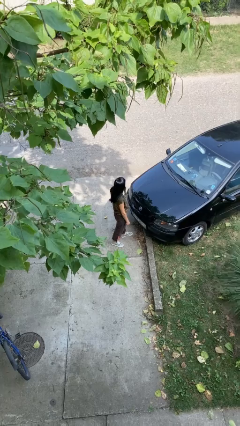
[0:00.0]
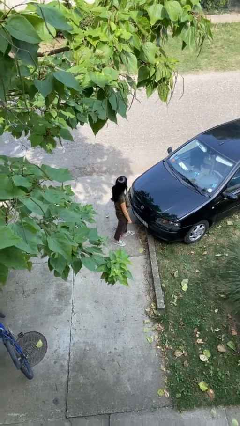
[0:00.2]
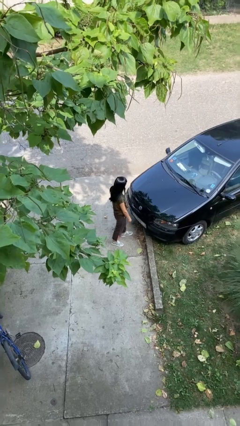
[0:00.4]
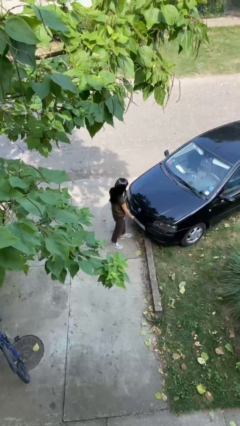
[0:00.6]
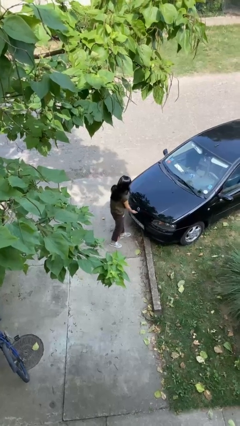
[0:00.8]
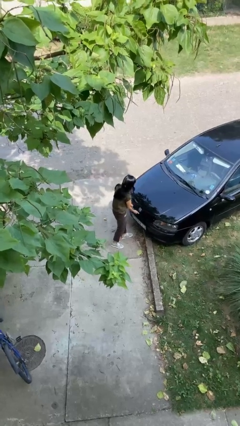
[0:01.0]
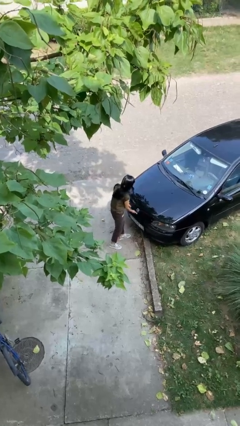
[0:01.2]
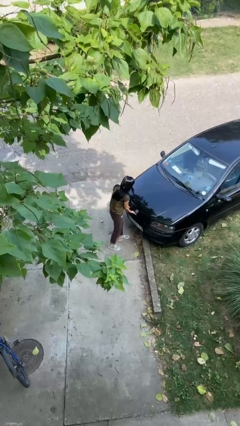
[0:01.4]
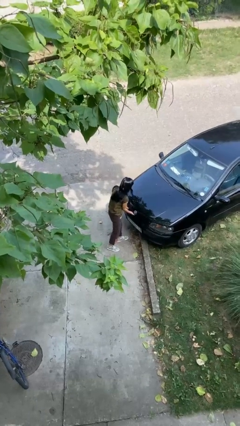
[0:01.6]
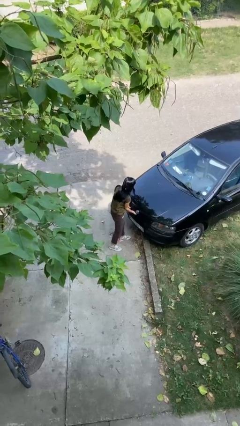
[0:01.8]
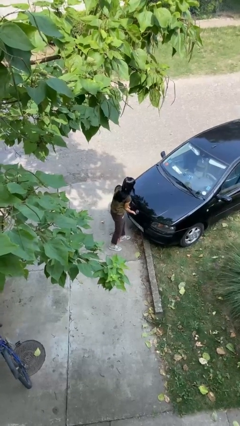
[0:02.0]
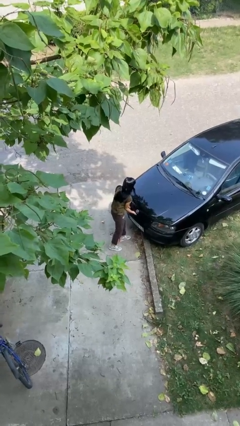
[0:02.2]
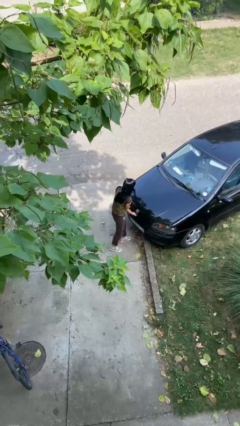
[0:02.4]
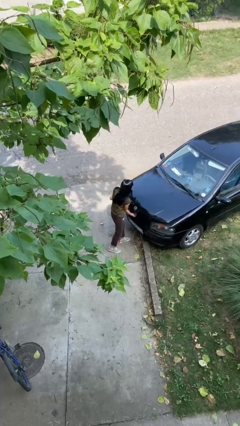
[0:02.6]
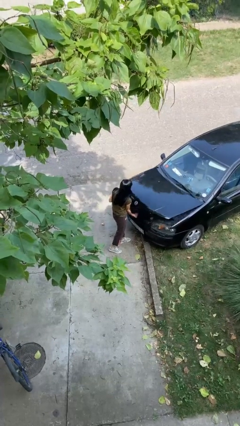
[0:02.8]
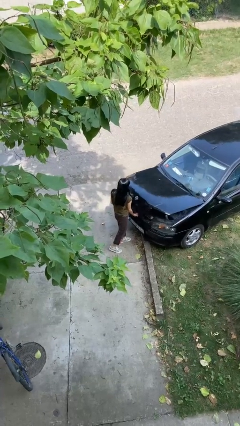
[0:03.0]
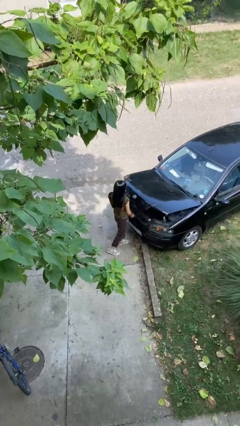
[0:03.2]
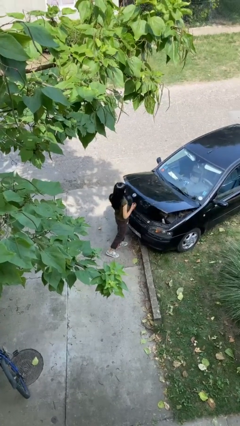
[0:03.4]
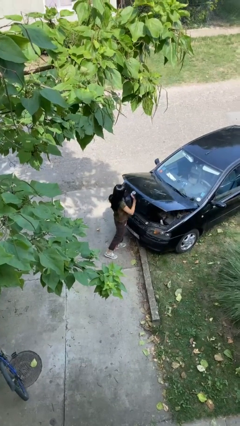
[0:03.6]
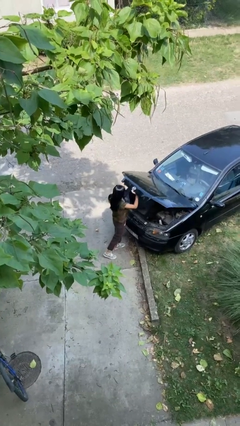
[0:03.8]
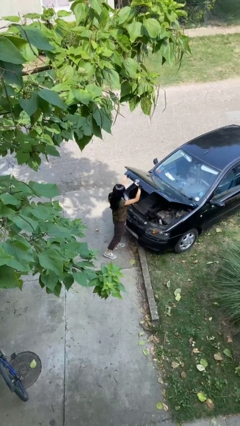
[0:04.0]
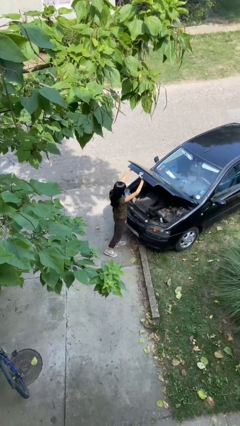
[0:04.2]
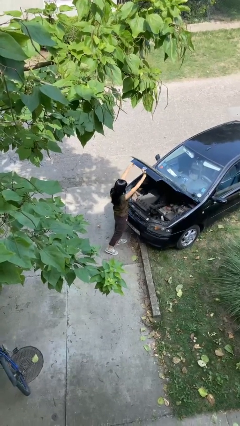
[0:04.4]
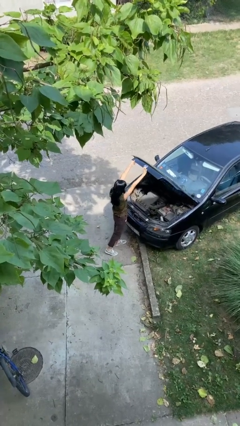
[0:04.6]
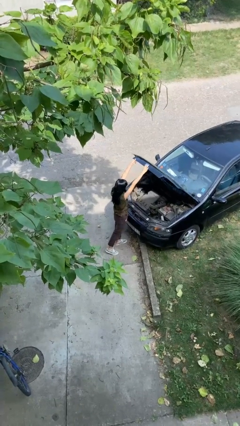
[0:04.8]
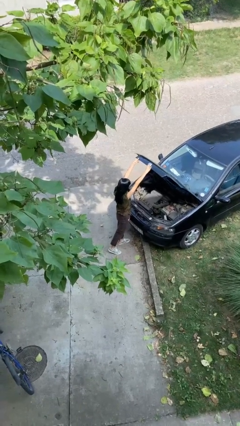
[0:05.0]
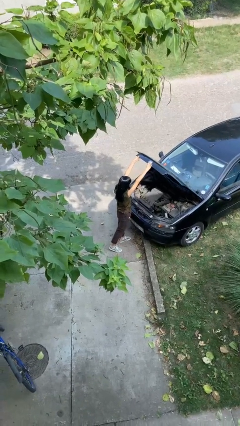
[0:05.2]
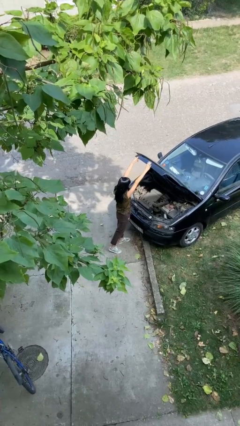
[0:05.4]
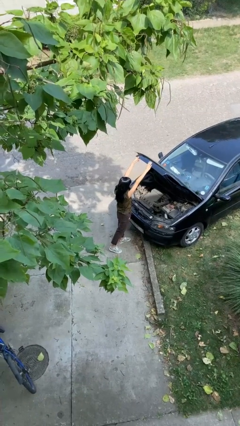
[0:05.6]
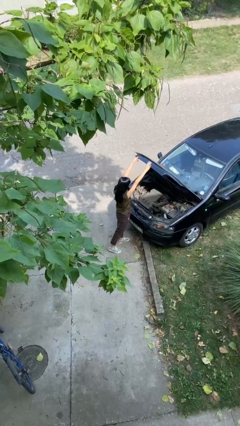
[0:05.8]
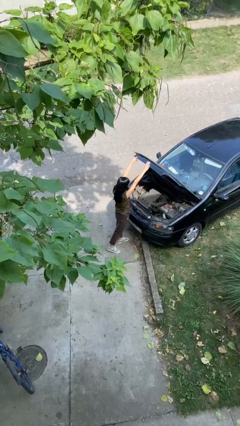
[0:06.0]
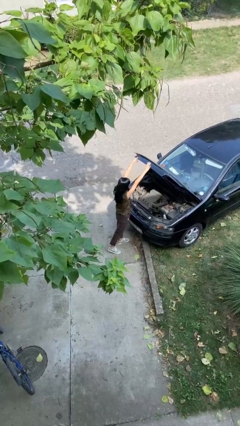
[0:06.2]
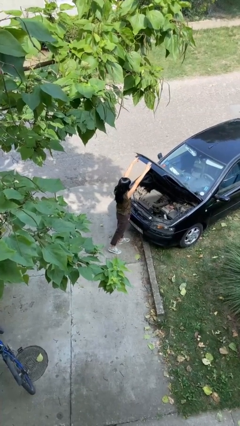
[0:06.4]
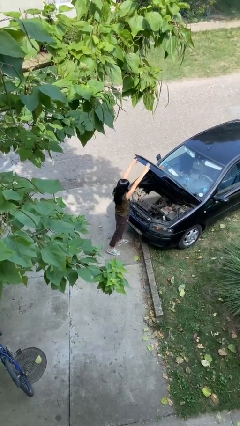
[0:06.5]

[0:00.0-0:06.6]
person opens car hood

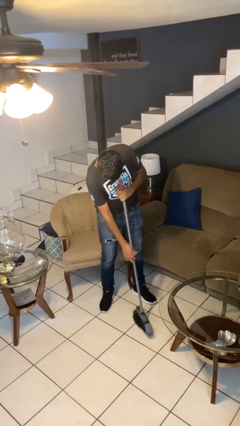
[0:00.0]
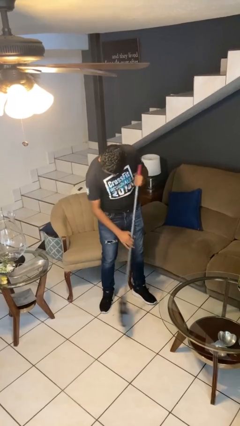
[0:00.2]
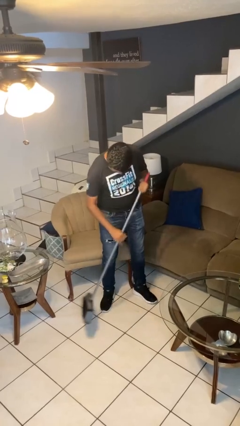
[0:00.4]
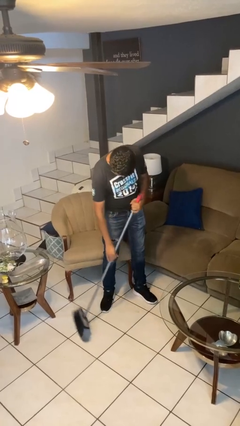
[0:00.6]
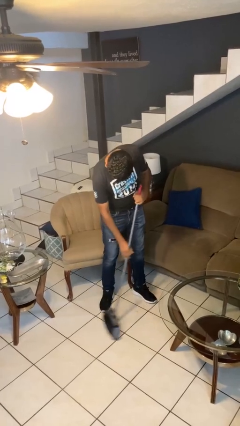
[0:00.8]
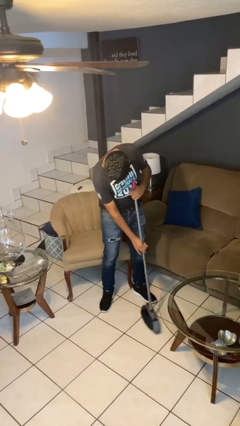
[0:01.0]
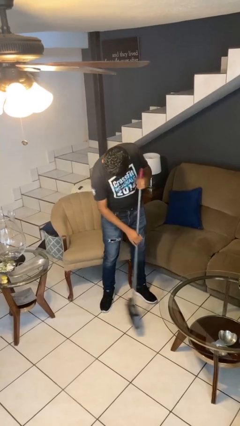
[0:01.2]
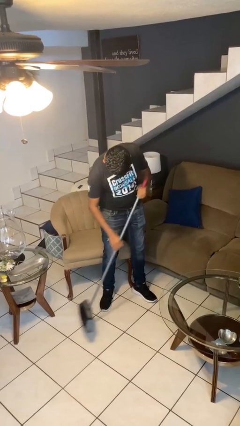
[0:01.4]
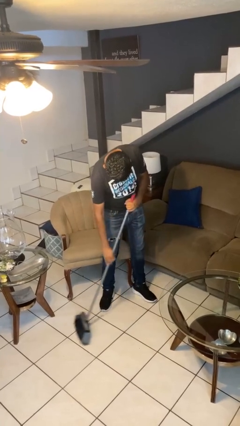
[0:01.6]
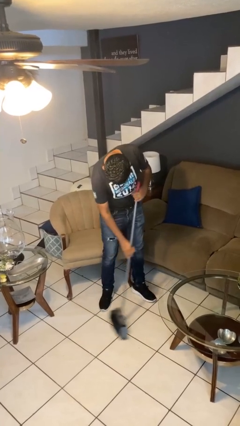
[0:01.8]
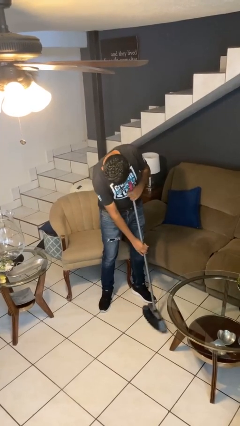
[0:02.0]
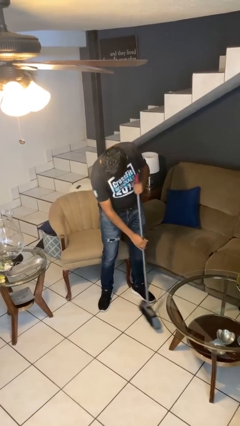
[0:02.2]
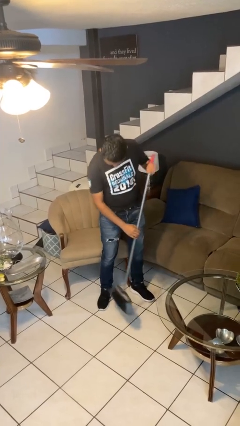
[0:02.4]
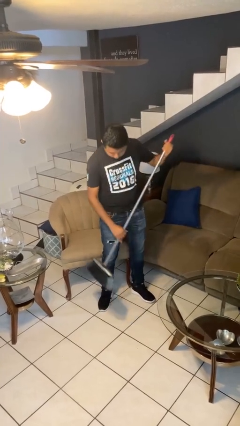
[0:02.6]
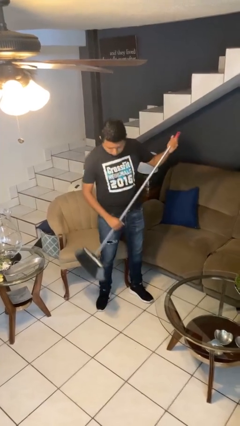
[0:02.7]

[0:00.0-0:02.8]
person sweeps floor

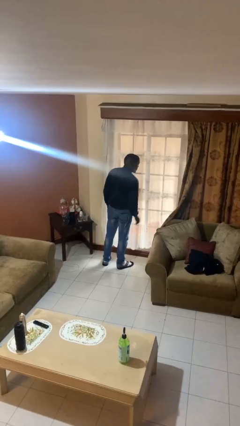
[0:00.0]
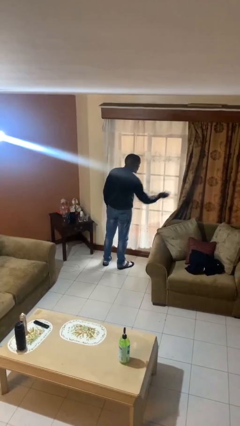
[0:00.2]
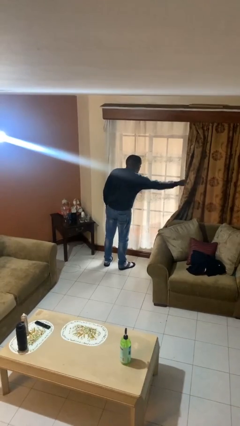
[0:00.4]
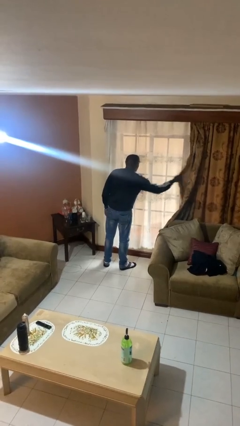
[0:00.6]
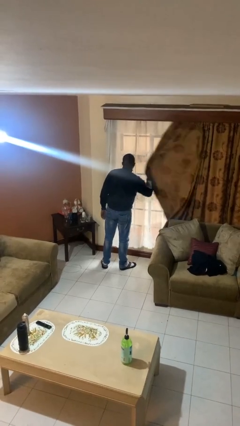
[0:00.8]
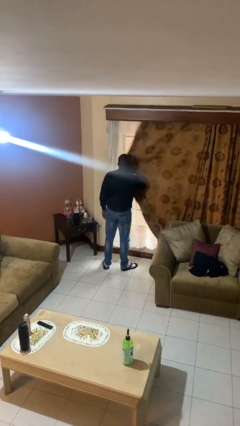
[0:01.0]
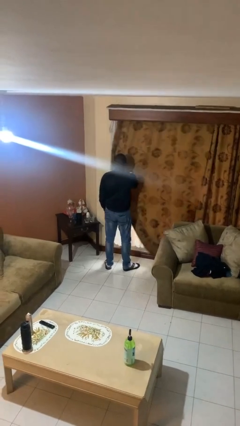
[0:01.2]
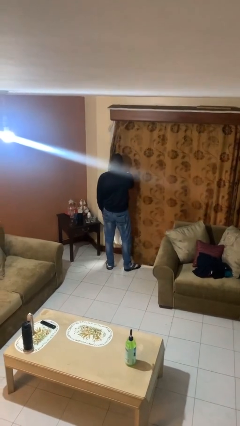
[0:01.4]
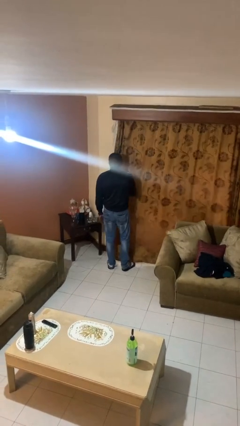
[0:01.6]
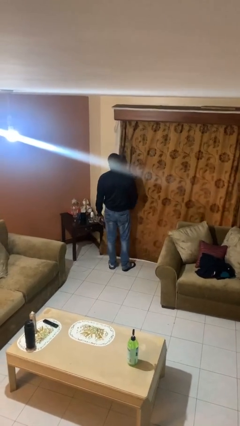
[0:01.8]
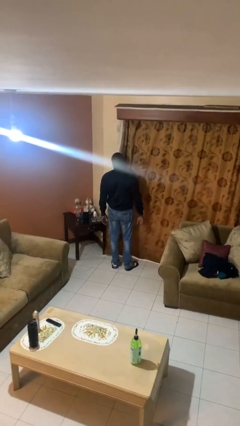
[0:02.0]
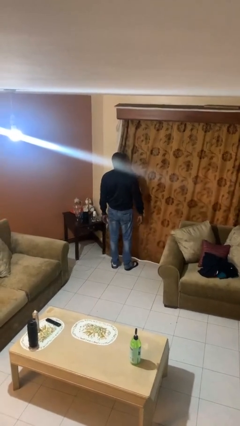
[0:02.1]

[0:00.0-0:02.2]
person closes curtains

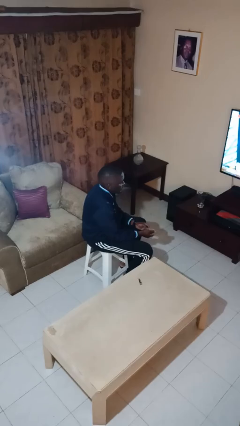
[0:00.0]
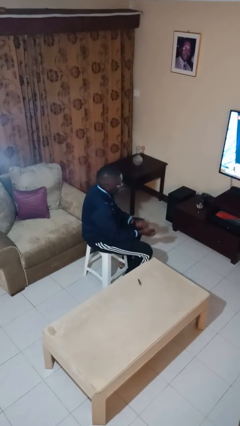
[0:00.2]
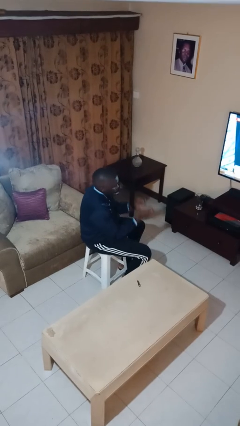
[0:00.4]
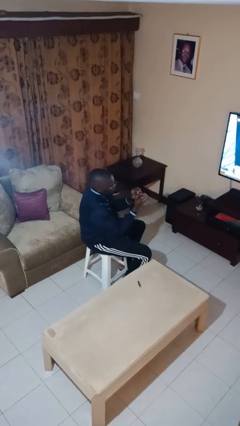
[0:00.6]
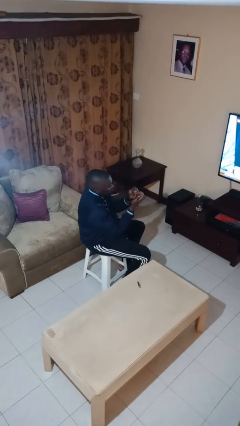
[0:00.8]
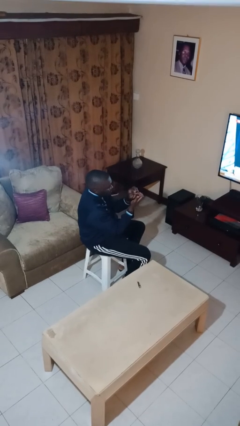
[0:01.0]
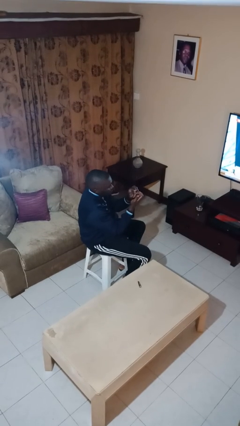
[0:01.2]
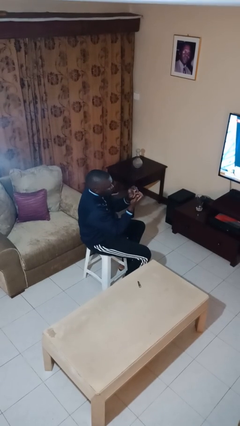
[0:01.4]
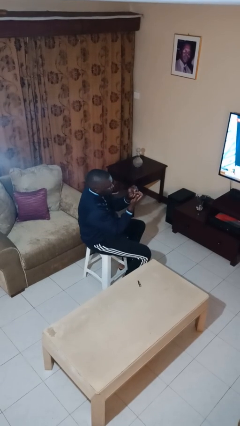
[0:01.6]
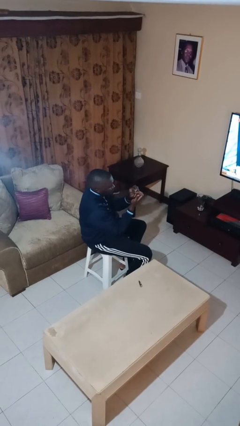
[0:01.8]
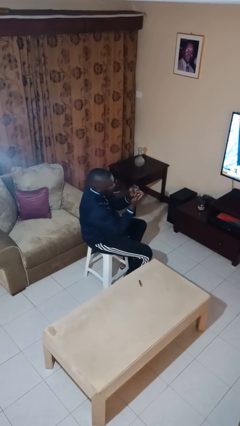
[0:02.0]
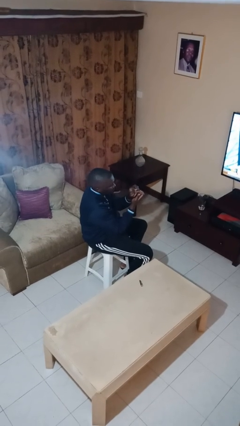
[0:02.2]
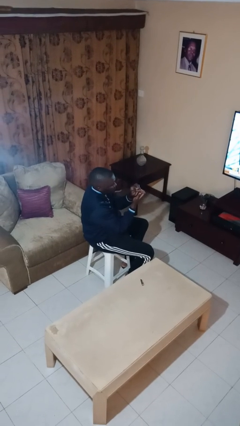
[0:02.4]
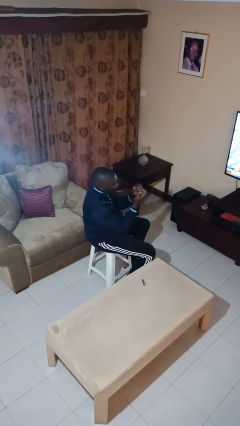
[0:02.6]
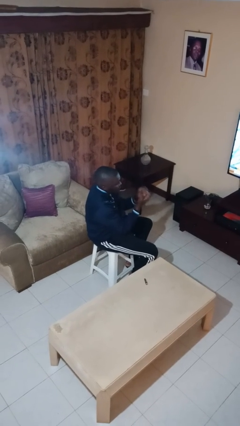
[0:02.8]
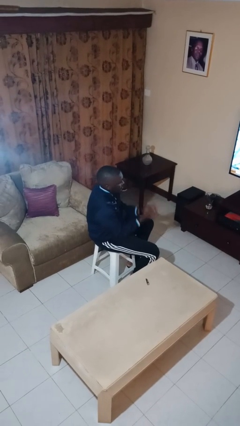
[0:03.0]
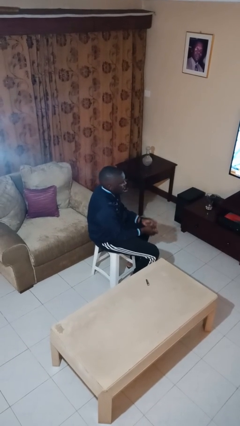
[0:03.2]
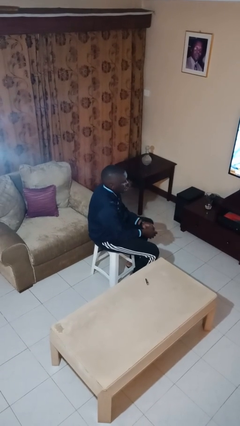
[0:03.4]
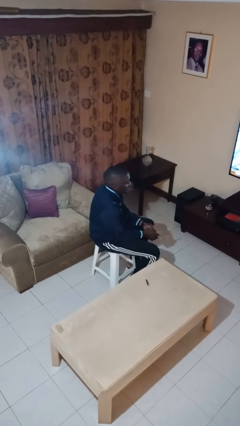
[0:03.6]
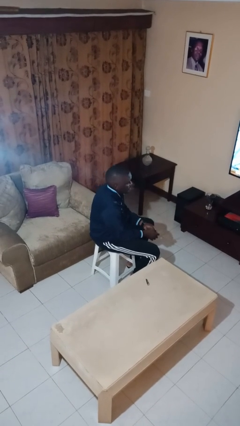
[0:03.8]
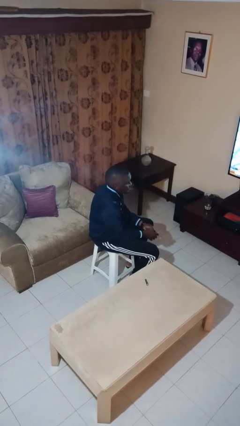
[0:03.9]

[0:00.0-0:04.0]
person files fingernails

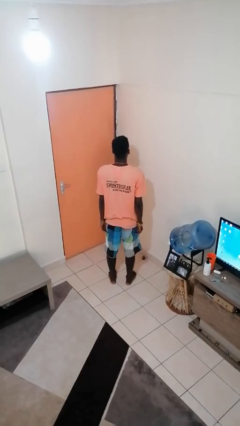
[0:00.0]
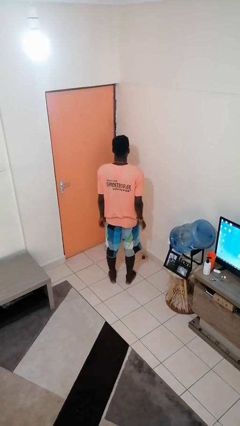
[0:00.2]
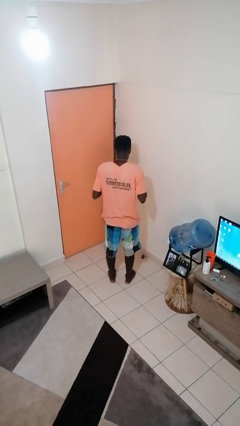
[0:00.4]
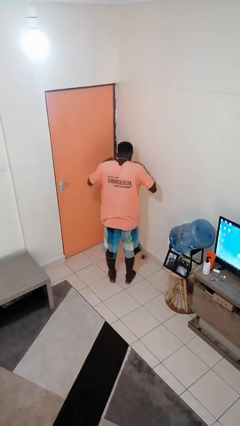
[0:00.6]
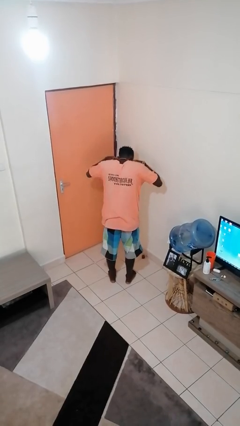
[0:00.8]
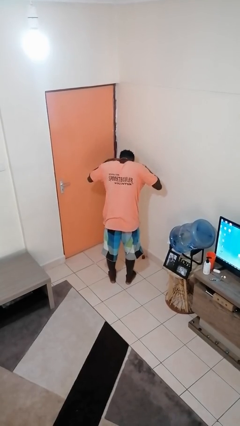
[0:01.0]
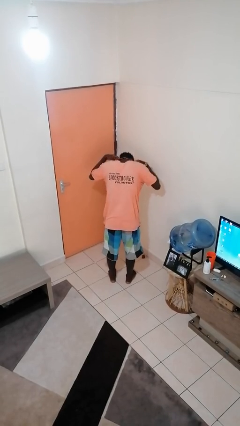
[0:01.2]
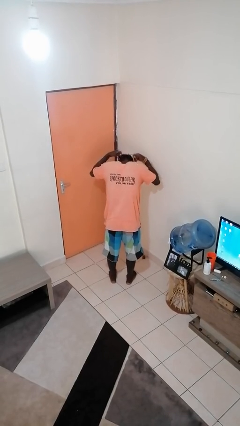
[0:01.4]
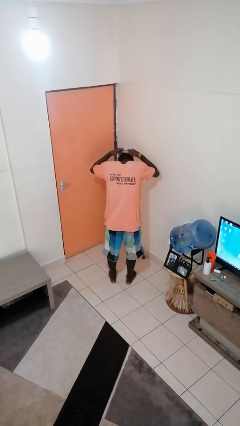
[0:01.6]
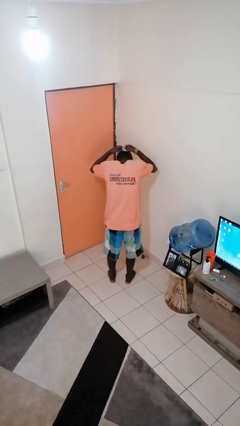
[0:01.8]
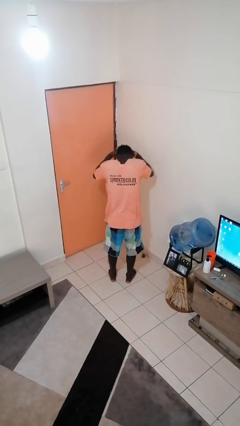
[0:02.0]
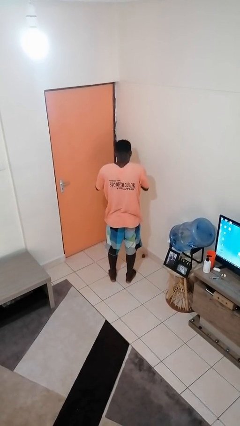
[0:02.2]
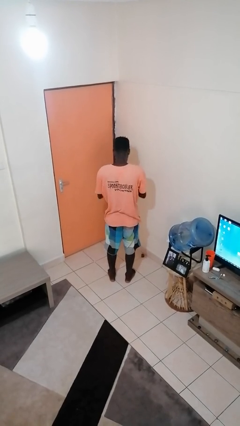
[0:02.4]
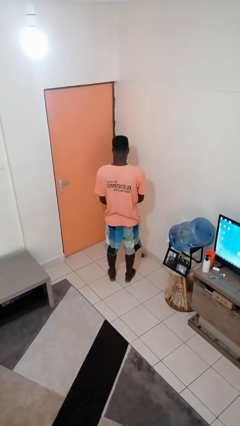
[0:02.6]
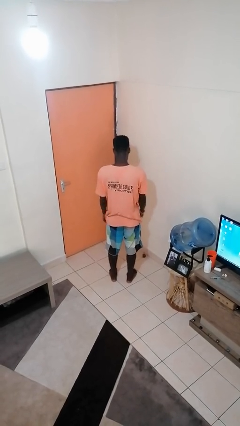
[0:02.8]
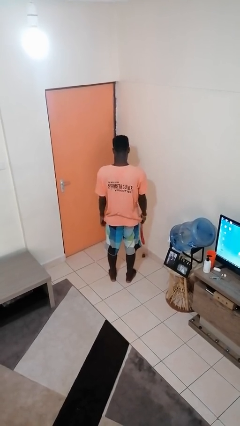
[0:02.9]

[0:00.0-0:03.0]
person takes off necklace
